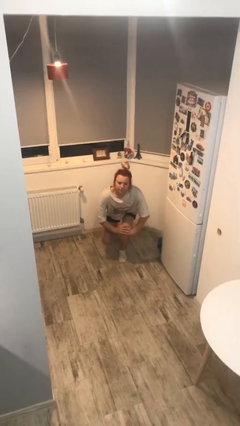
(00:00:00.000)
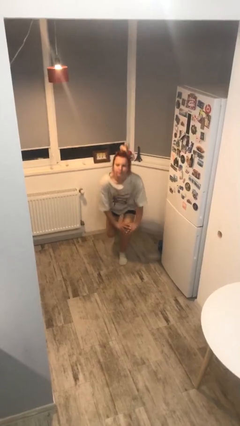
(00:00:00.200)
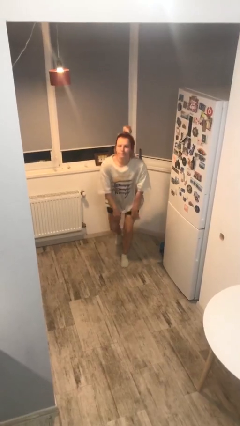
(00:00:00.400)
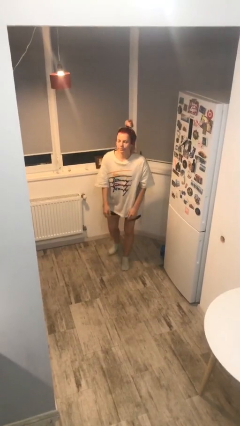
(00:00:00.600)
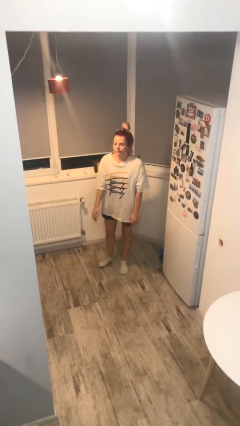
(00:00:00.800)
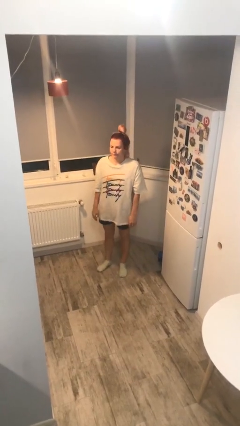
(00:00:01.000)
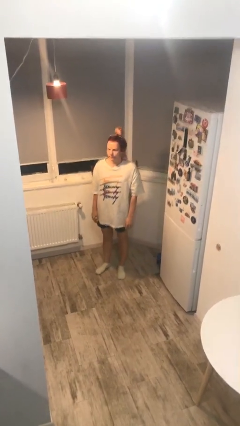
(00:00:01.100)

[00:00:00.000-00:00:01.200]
person stands up from floor

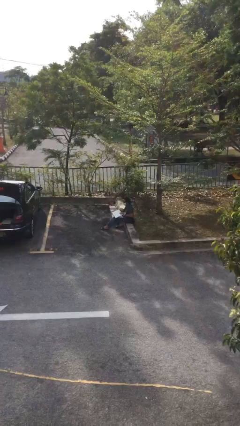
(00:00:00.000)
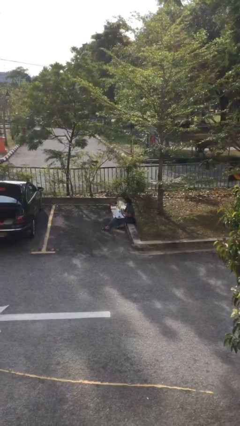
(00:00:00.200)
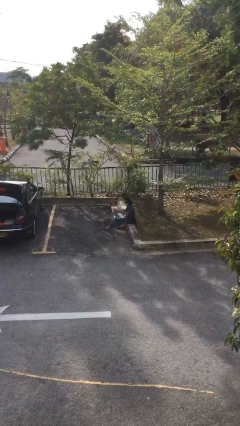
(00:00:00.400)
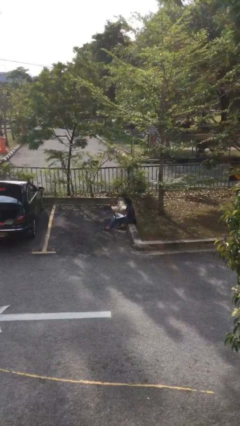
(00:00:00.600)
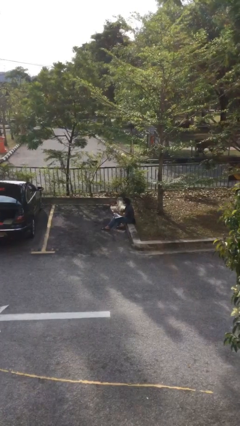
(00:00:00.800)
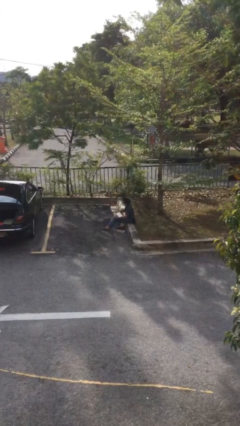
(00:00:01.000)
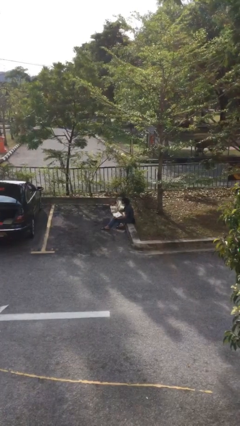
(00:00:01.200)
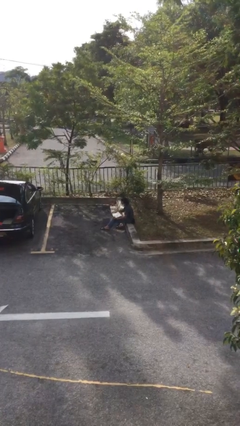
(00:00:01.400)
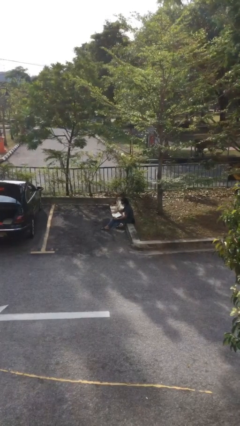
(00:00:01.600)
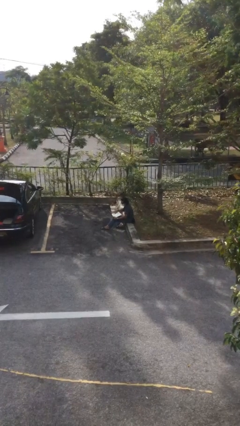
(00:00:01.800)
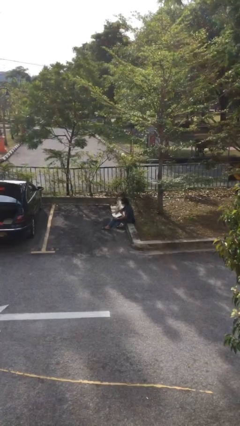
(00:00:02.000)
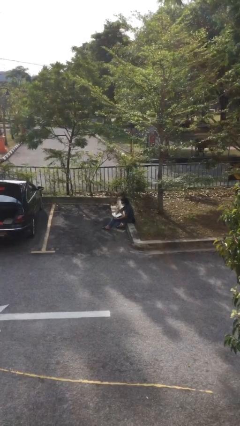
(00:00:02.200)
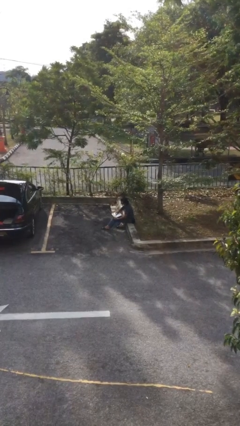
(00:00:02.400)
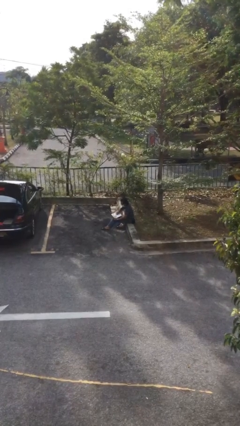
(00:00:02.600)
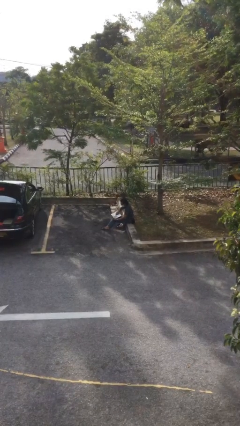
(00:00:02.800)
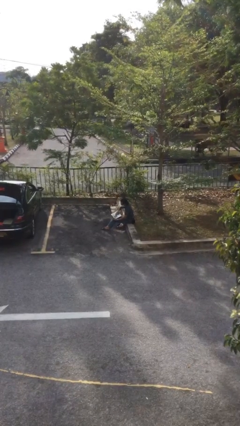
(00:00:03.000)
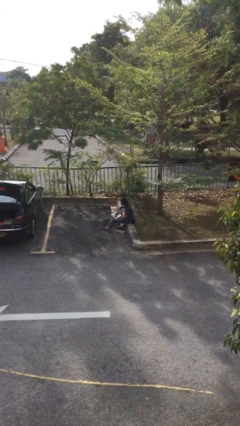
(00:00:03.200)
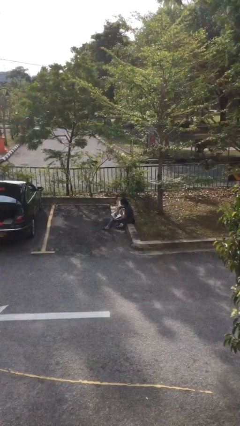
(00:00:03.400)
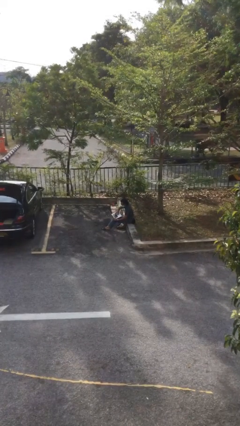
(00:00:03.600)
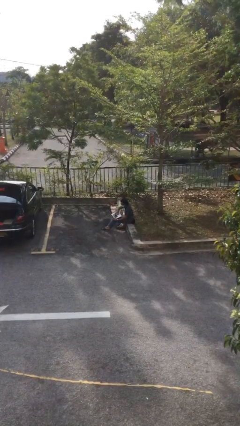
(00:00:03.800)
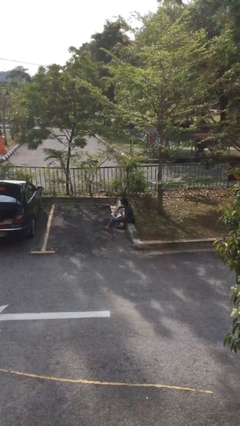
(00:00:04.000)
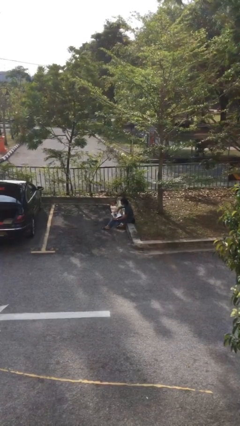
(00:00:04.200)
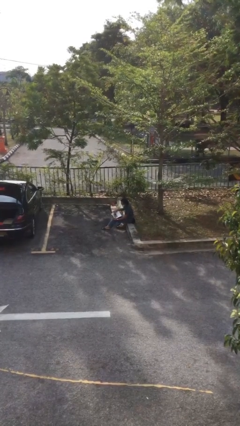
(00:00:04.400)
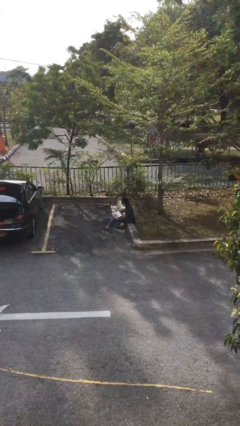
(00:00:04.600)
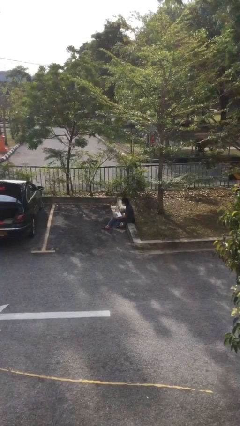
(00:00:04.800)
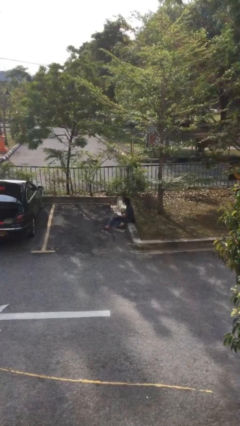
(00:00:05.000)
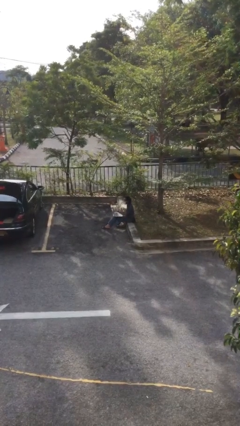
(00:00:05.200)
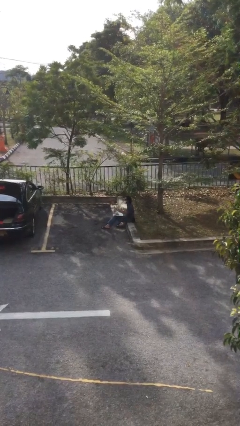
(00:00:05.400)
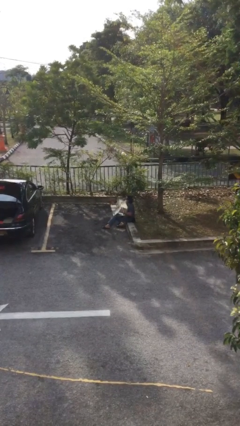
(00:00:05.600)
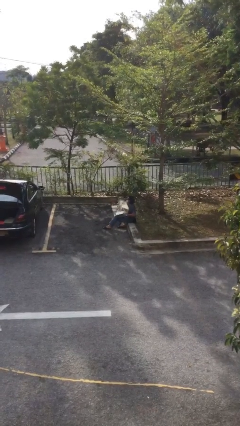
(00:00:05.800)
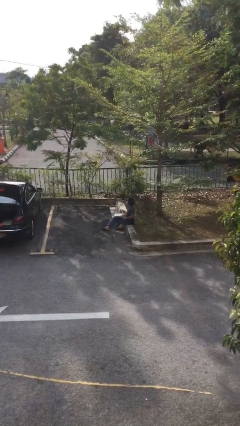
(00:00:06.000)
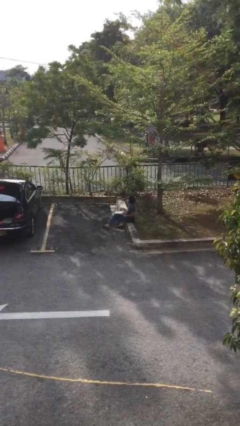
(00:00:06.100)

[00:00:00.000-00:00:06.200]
person interacts with laptop

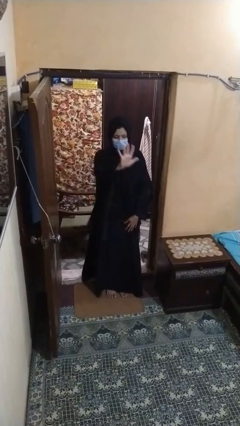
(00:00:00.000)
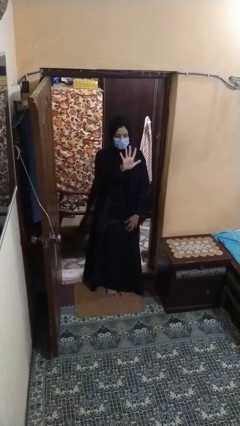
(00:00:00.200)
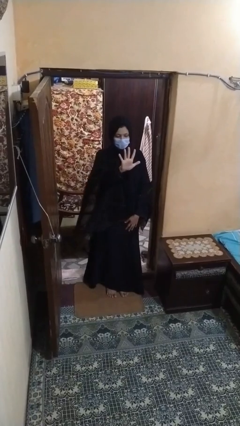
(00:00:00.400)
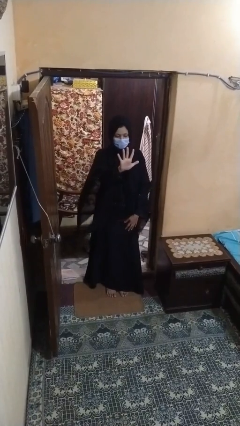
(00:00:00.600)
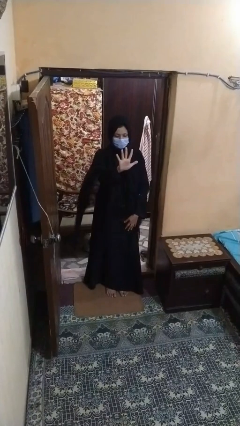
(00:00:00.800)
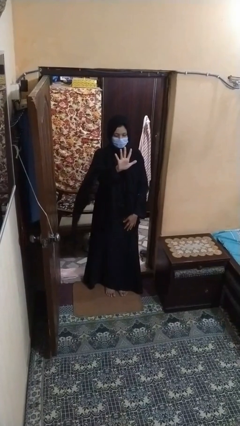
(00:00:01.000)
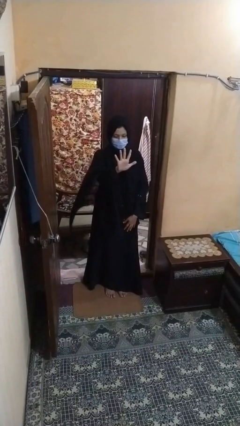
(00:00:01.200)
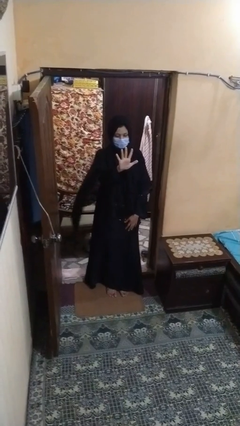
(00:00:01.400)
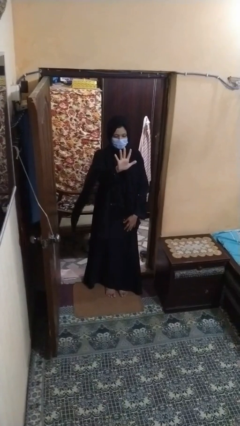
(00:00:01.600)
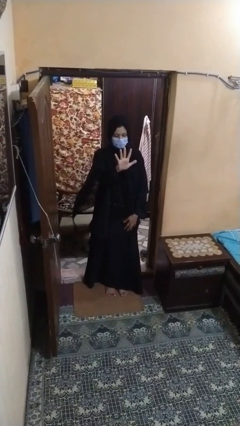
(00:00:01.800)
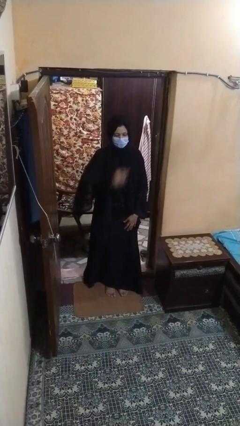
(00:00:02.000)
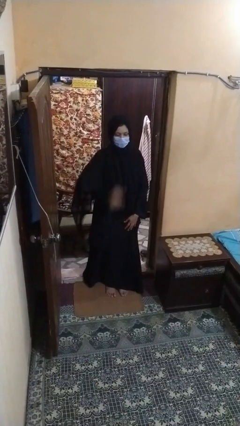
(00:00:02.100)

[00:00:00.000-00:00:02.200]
person gestures number five

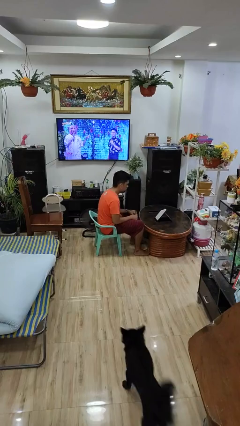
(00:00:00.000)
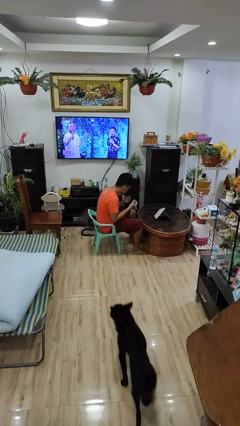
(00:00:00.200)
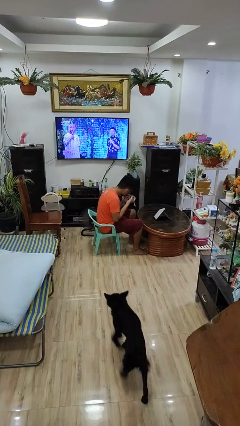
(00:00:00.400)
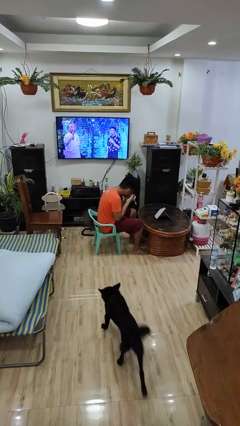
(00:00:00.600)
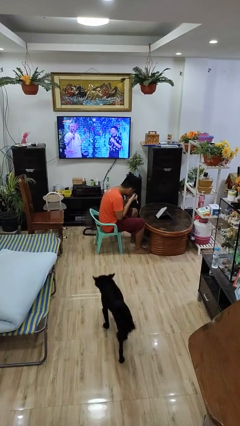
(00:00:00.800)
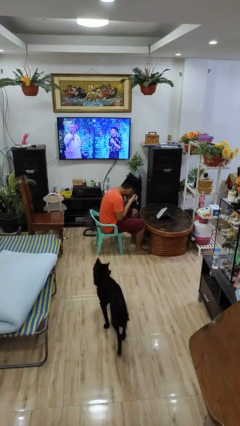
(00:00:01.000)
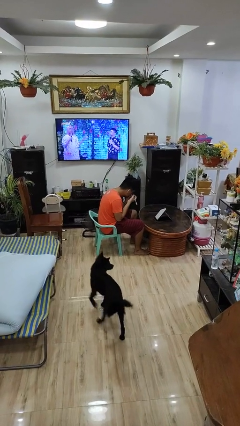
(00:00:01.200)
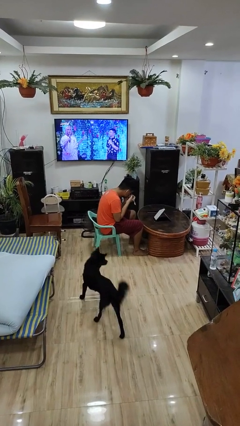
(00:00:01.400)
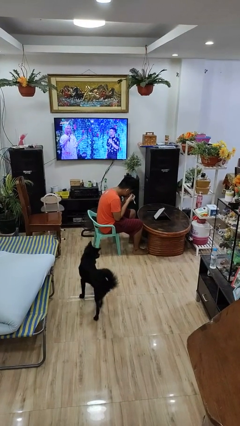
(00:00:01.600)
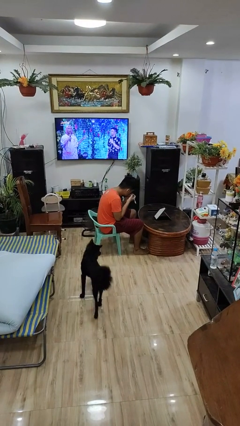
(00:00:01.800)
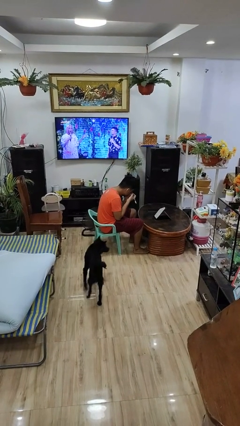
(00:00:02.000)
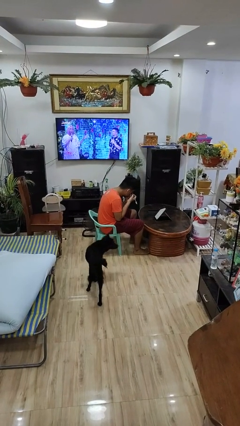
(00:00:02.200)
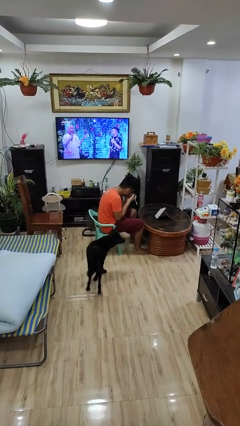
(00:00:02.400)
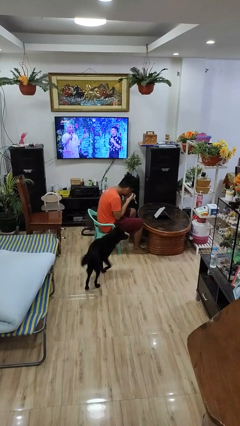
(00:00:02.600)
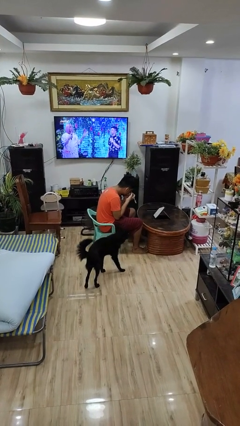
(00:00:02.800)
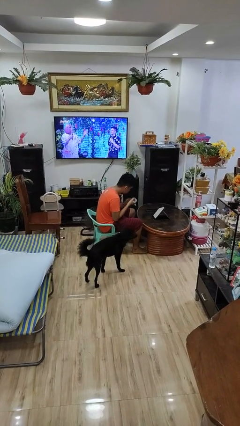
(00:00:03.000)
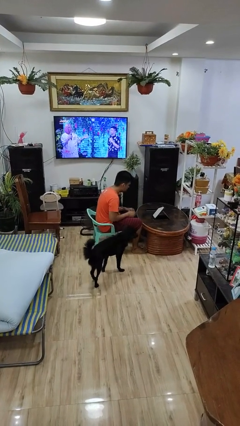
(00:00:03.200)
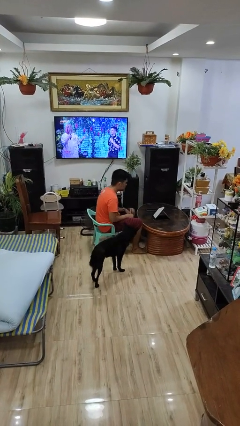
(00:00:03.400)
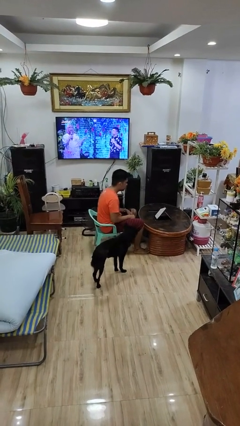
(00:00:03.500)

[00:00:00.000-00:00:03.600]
person applies eye makeup

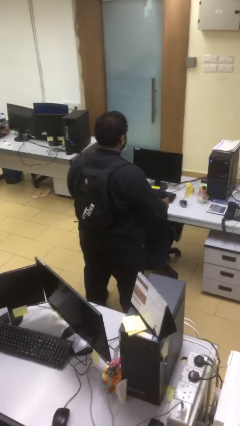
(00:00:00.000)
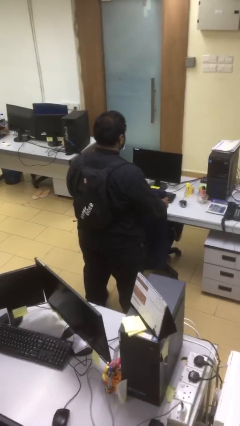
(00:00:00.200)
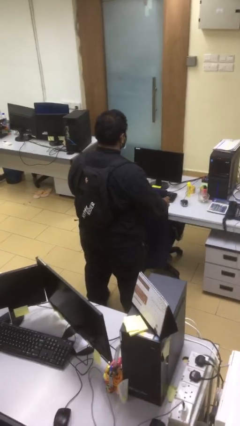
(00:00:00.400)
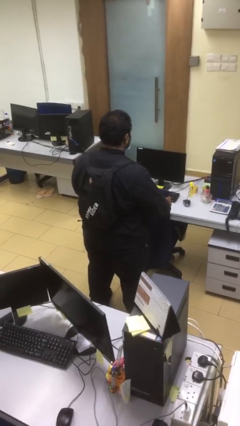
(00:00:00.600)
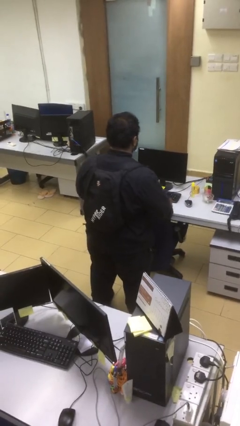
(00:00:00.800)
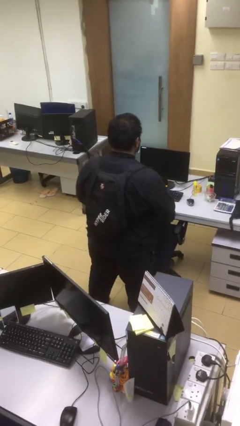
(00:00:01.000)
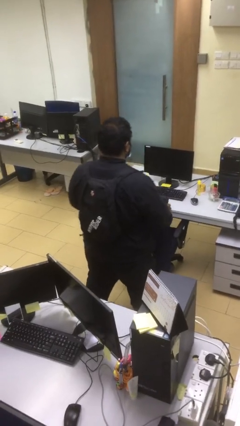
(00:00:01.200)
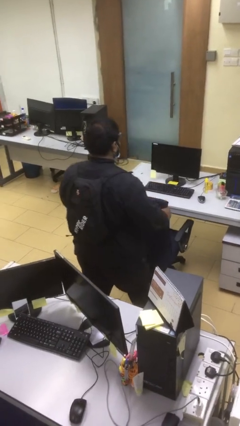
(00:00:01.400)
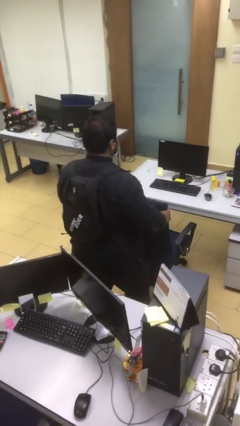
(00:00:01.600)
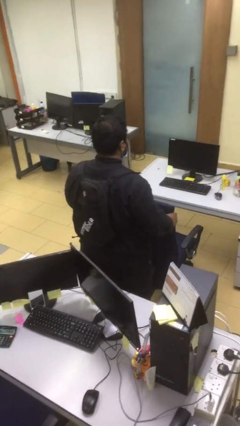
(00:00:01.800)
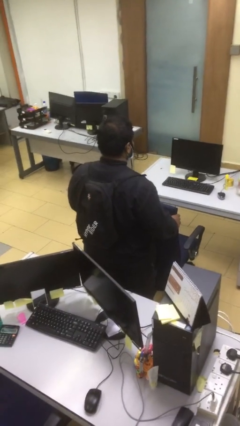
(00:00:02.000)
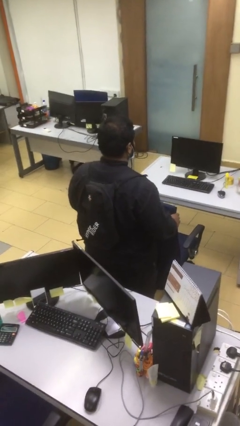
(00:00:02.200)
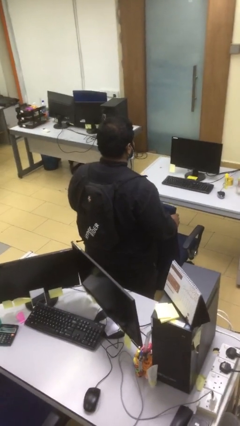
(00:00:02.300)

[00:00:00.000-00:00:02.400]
person pulls out chair

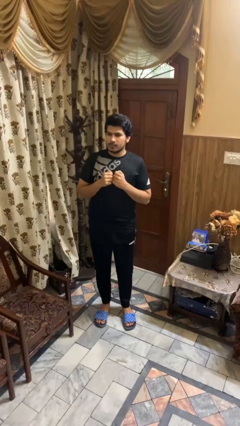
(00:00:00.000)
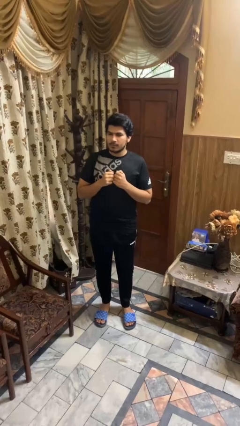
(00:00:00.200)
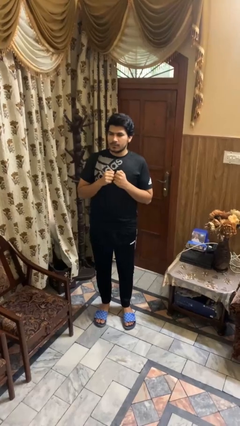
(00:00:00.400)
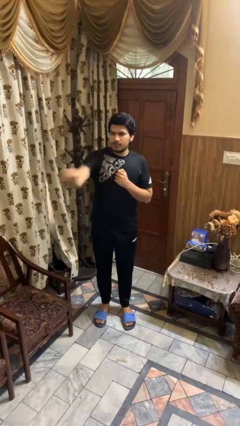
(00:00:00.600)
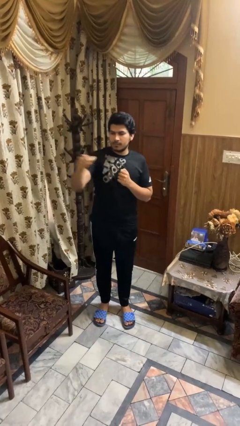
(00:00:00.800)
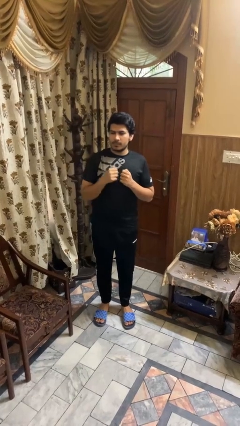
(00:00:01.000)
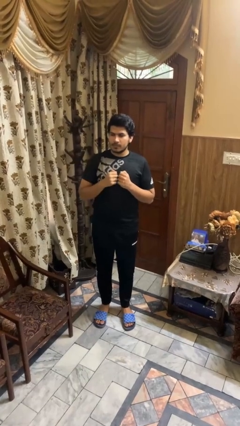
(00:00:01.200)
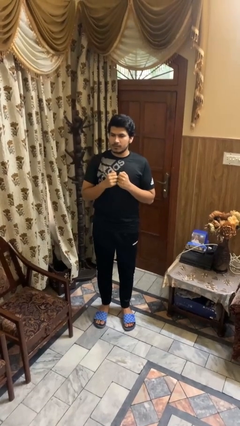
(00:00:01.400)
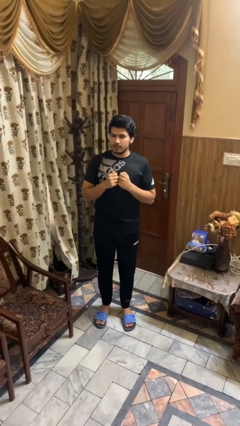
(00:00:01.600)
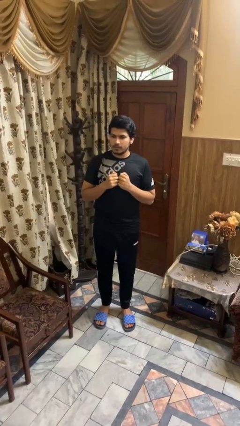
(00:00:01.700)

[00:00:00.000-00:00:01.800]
person karate chop
